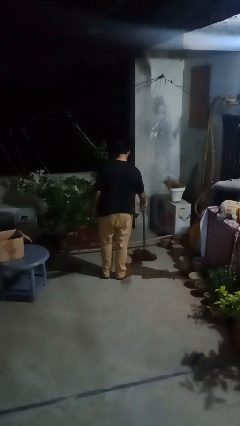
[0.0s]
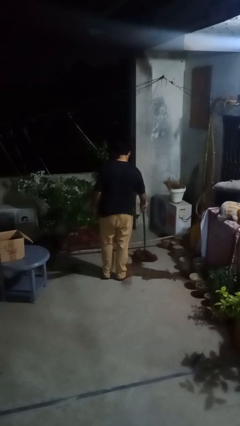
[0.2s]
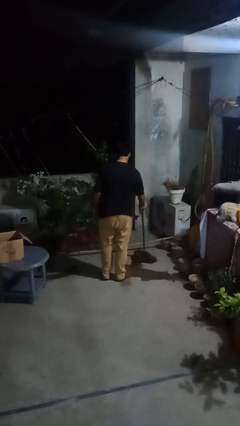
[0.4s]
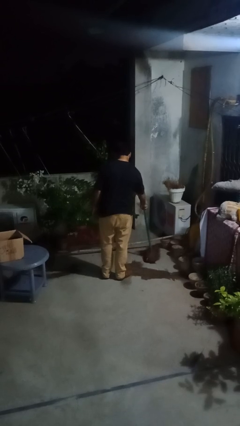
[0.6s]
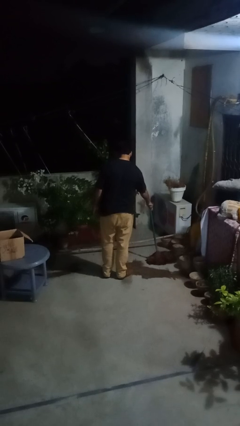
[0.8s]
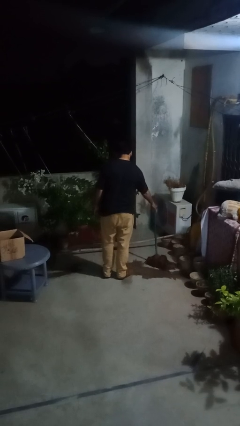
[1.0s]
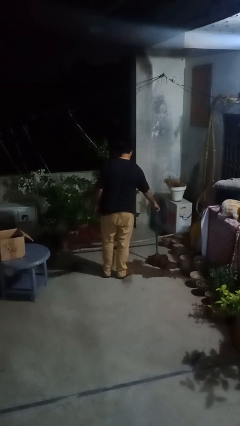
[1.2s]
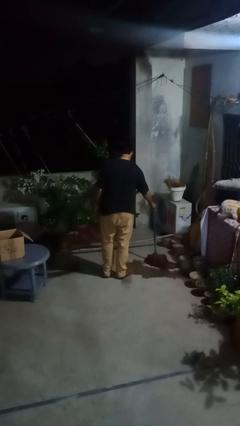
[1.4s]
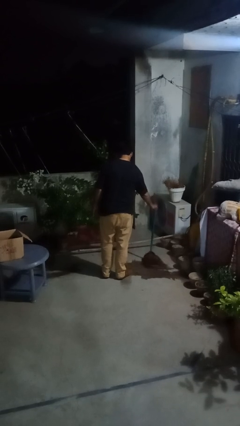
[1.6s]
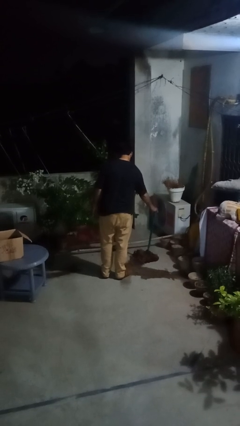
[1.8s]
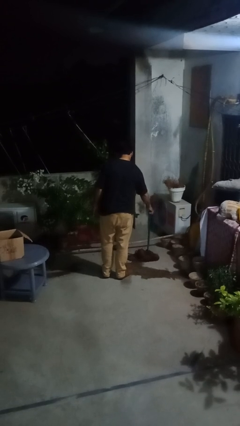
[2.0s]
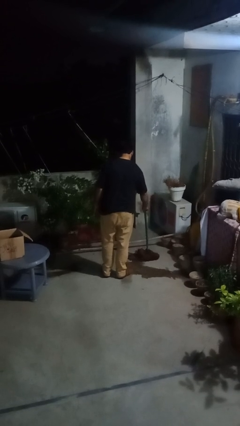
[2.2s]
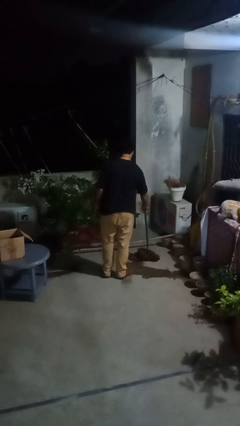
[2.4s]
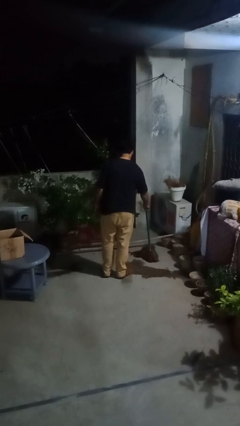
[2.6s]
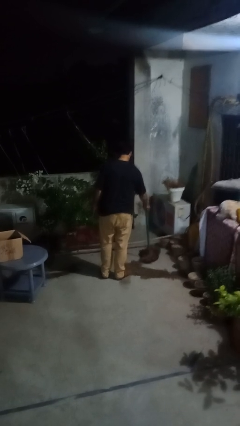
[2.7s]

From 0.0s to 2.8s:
person mops

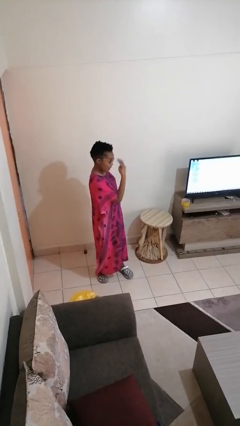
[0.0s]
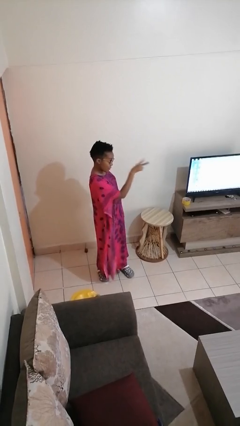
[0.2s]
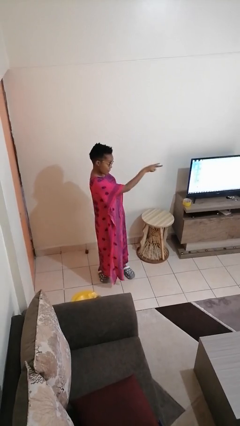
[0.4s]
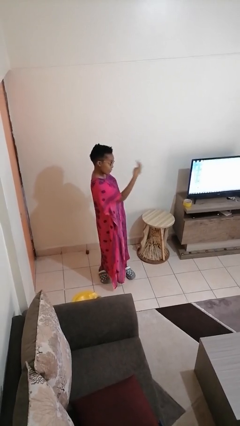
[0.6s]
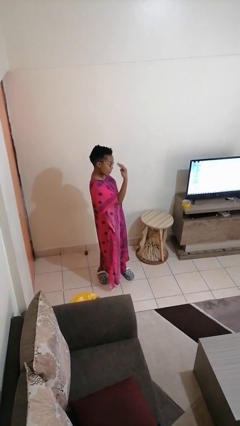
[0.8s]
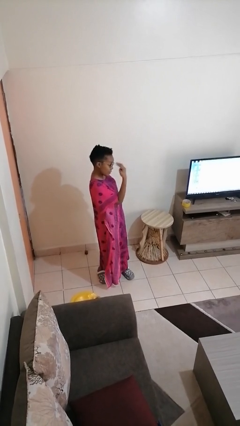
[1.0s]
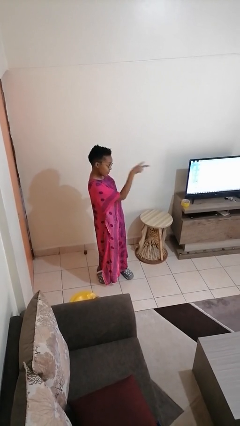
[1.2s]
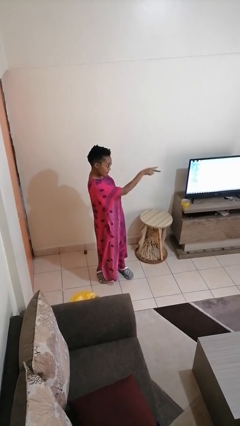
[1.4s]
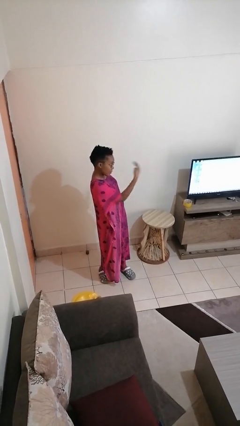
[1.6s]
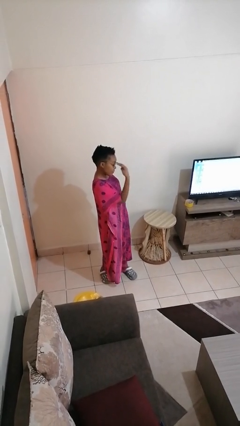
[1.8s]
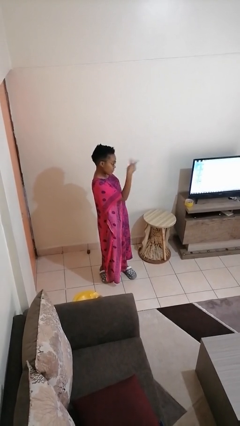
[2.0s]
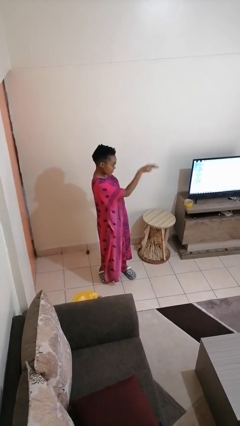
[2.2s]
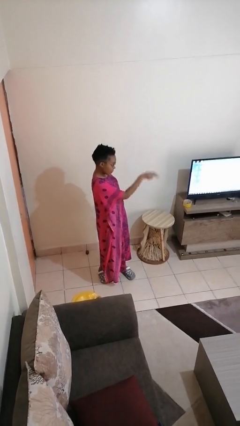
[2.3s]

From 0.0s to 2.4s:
person gestures watch closely

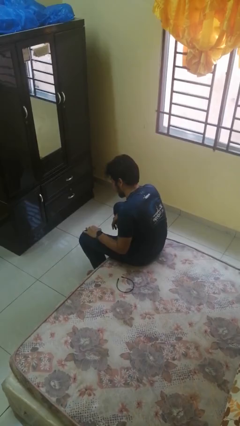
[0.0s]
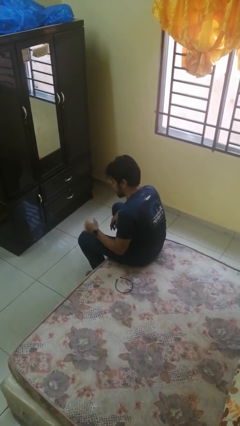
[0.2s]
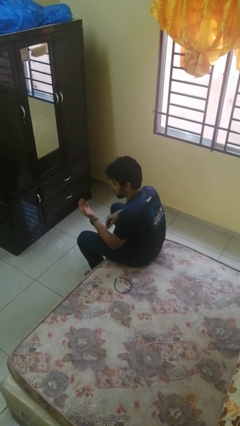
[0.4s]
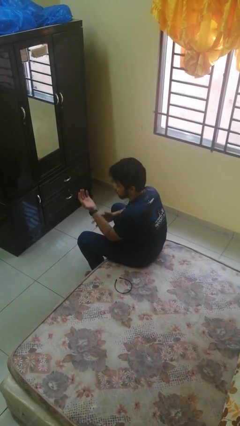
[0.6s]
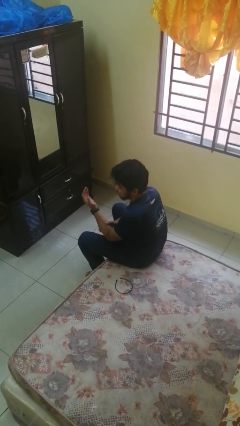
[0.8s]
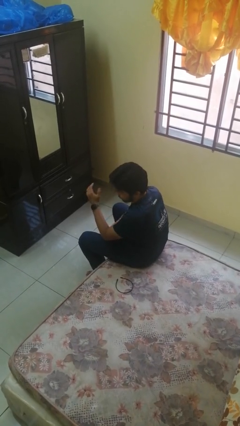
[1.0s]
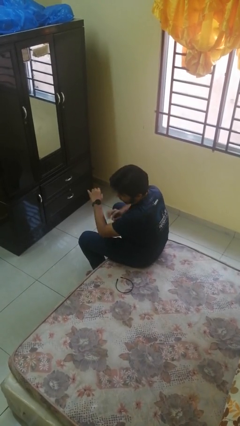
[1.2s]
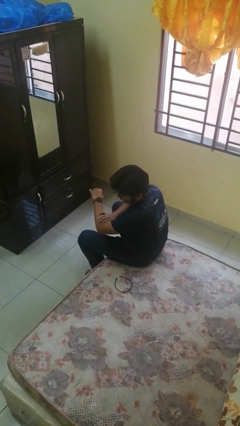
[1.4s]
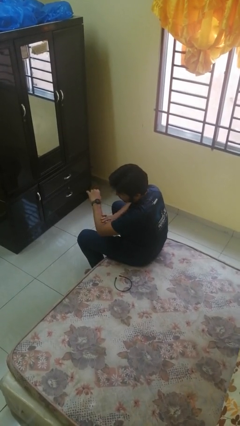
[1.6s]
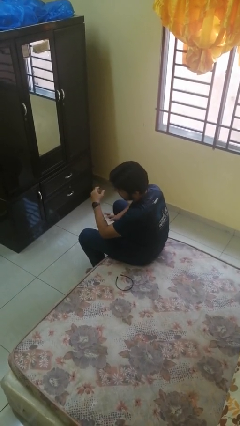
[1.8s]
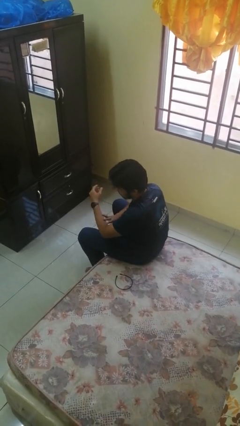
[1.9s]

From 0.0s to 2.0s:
person looks at hands in lap

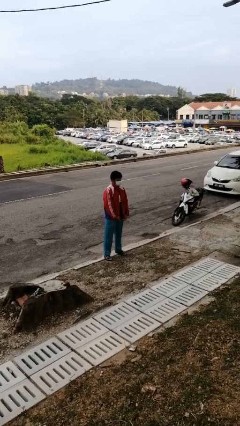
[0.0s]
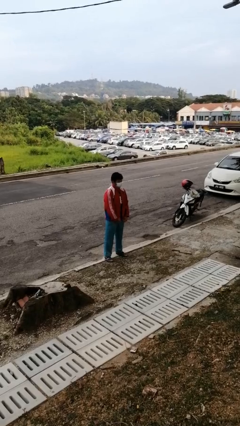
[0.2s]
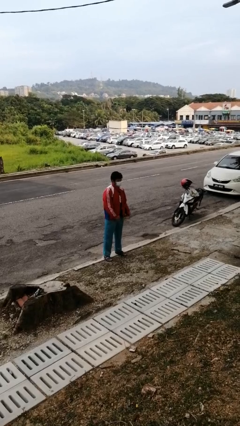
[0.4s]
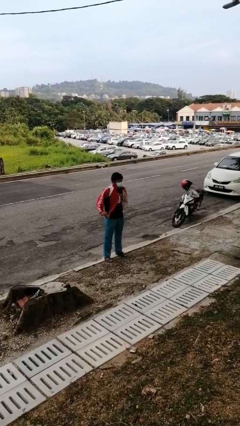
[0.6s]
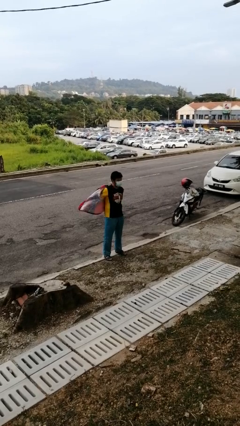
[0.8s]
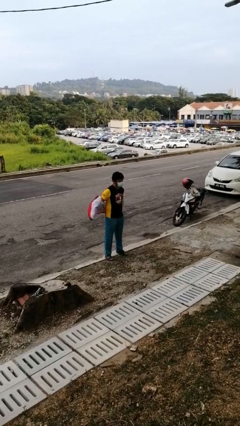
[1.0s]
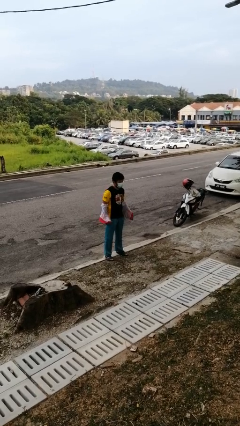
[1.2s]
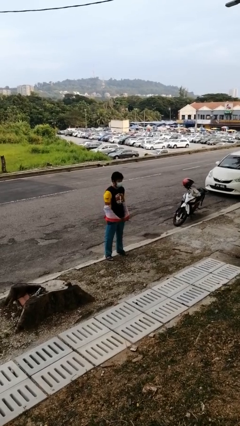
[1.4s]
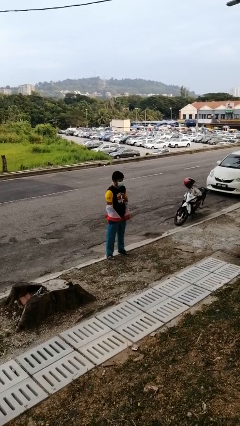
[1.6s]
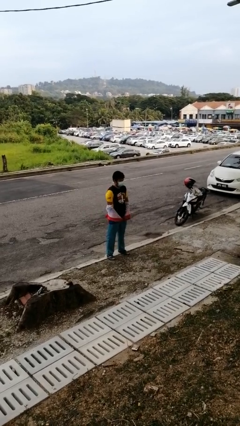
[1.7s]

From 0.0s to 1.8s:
person takes off jacket

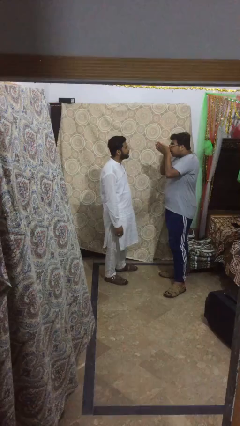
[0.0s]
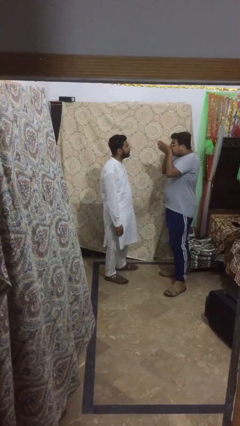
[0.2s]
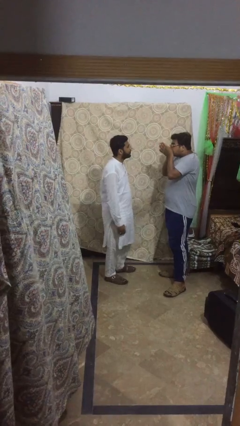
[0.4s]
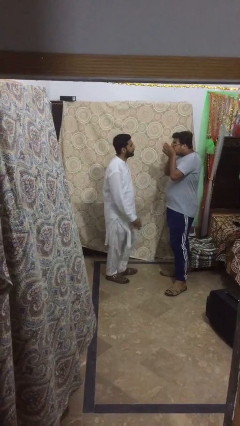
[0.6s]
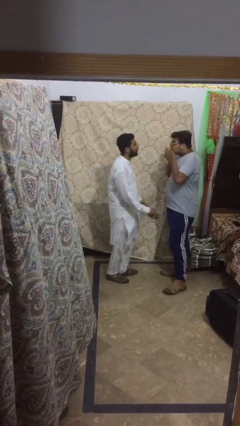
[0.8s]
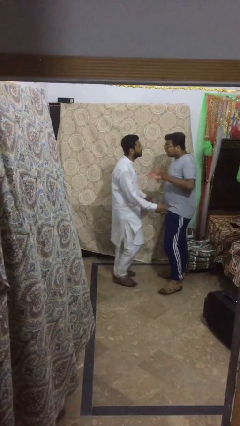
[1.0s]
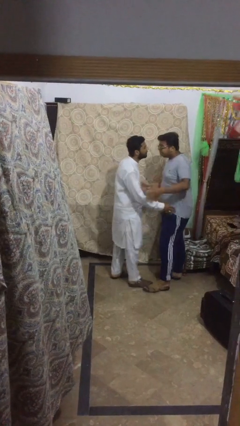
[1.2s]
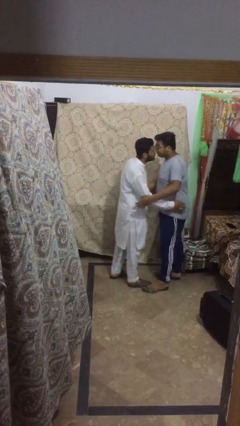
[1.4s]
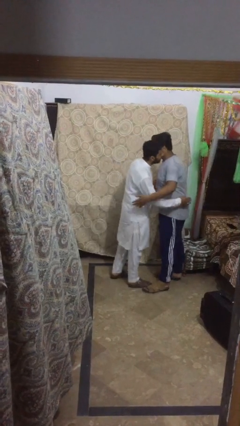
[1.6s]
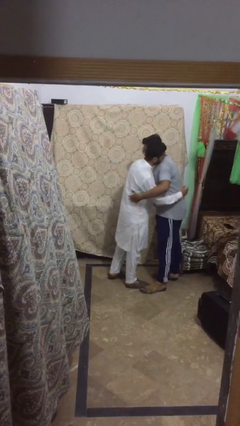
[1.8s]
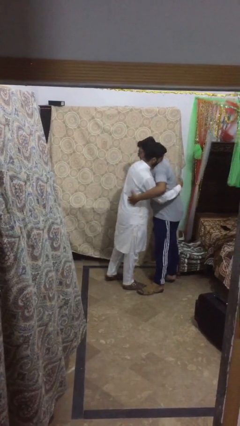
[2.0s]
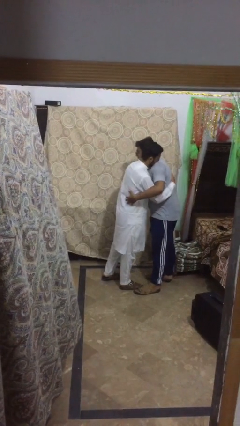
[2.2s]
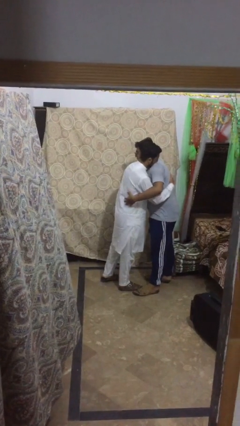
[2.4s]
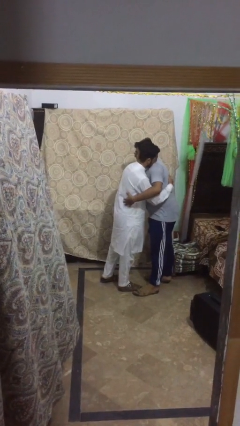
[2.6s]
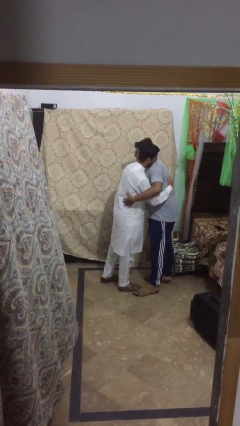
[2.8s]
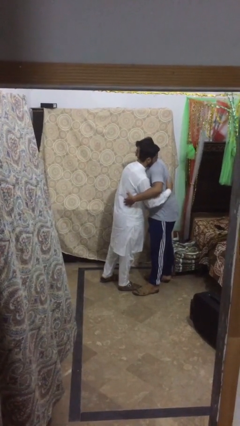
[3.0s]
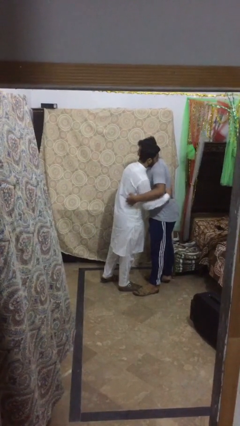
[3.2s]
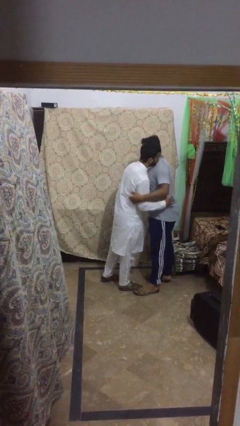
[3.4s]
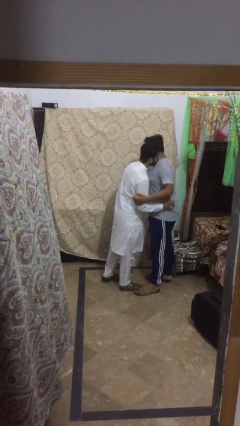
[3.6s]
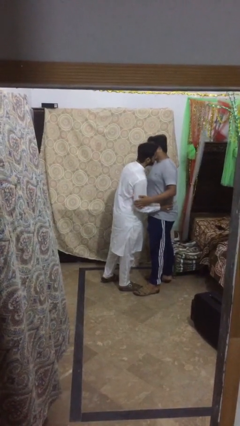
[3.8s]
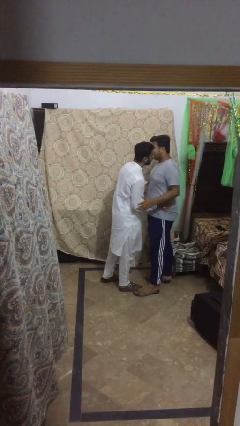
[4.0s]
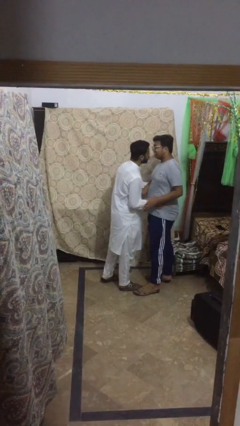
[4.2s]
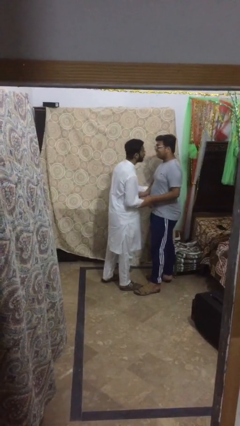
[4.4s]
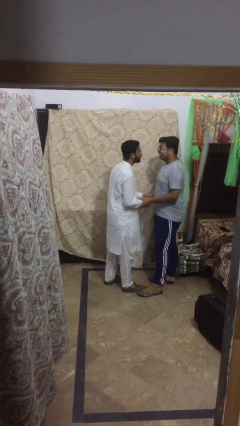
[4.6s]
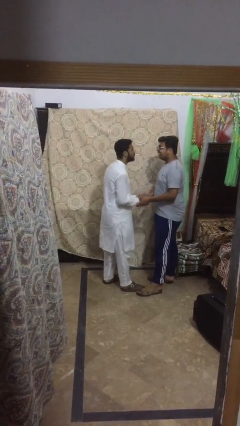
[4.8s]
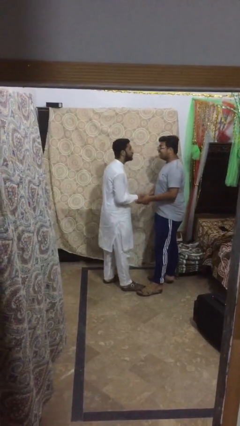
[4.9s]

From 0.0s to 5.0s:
person embraces person

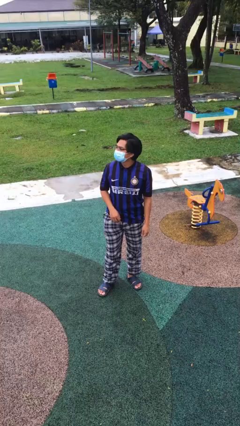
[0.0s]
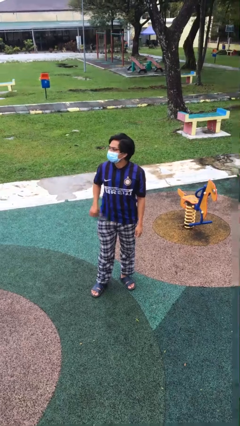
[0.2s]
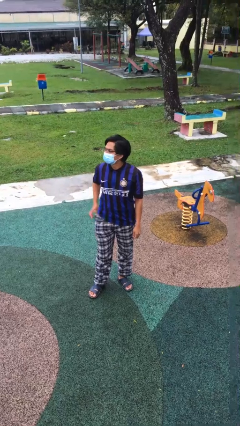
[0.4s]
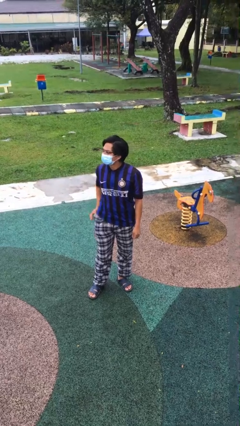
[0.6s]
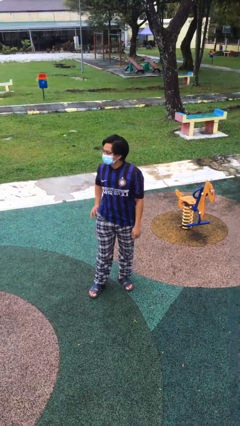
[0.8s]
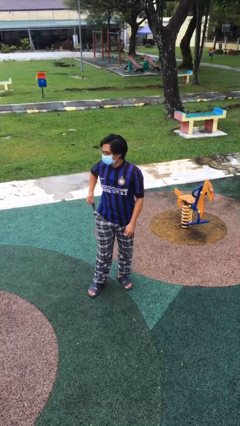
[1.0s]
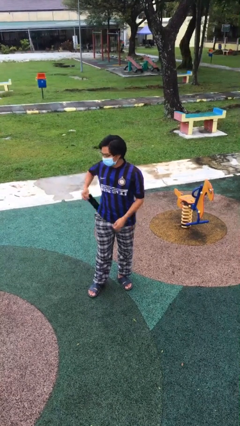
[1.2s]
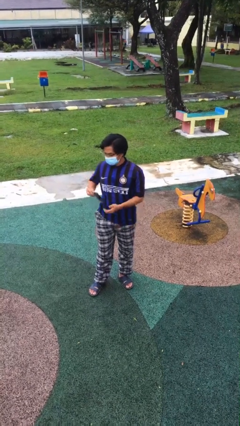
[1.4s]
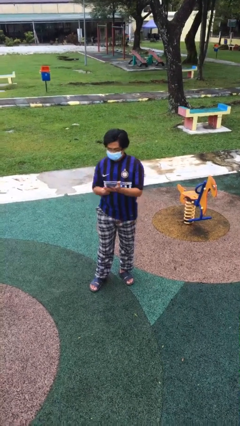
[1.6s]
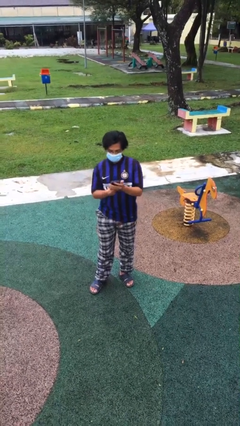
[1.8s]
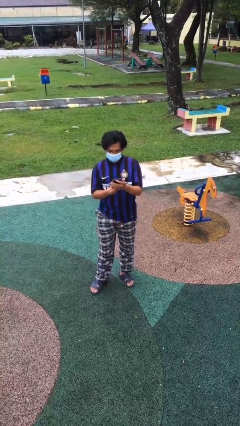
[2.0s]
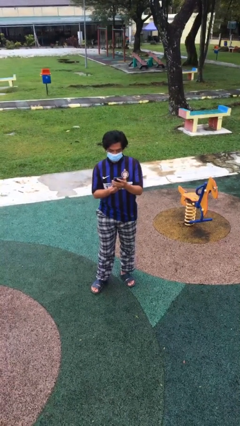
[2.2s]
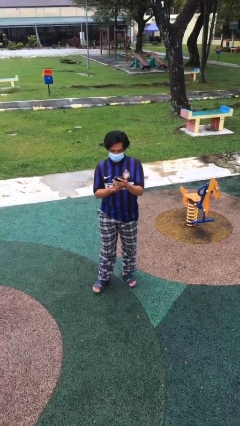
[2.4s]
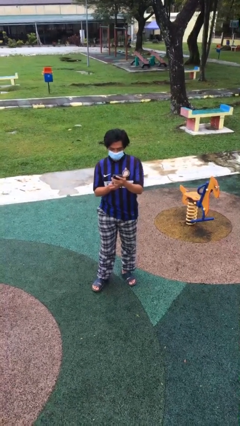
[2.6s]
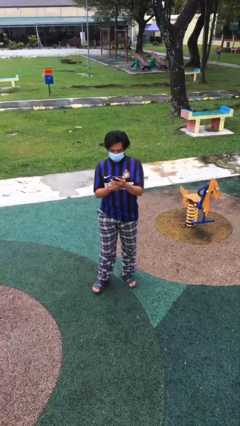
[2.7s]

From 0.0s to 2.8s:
person takes phone from pocket

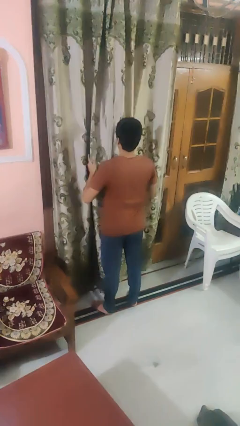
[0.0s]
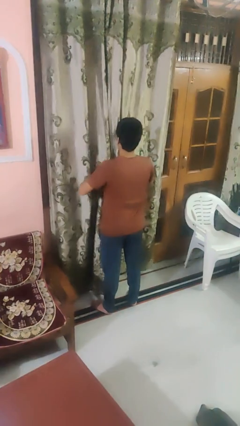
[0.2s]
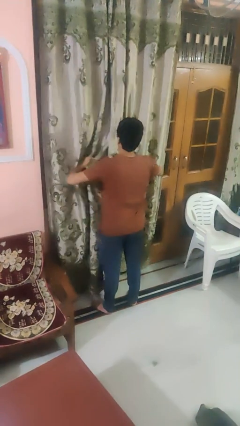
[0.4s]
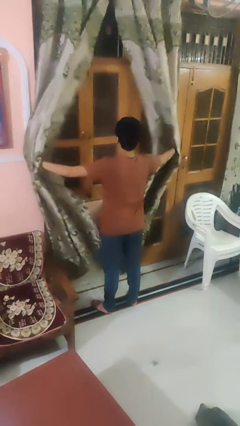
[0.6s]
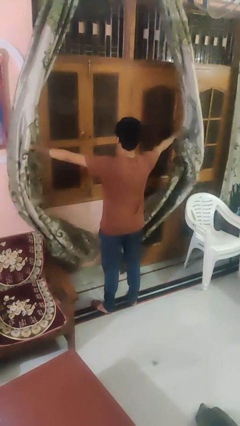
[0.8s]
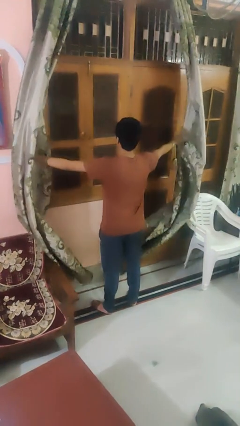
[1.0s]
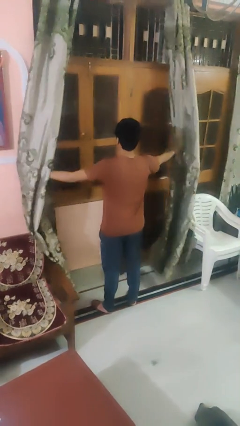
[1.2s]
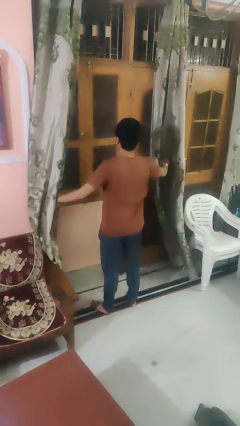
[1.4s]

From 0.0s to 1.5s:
person opens curtains
